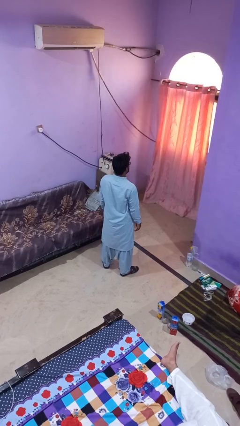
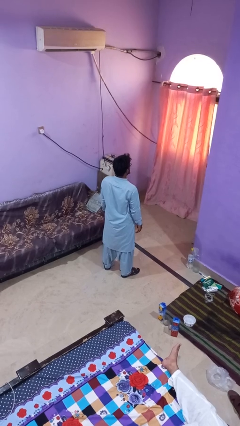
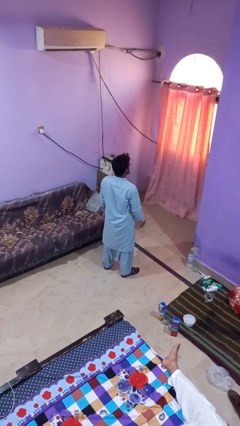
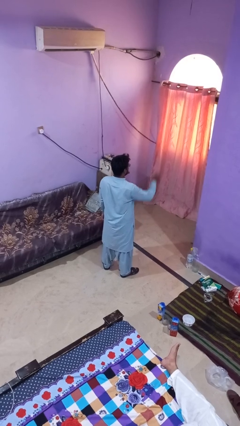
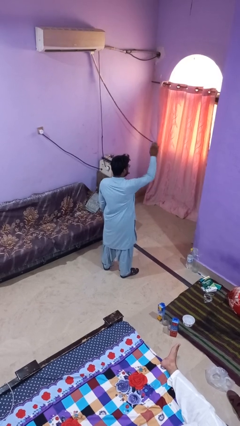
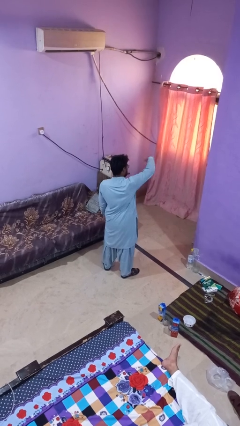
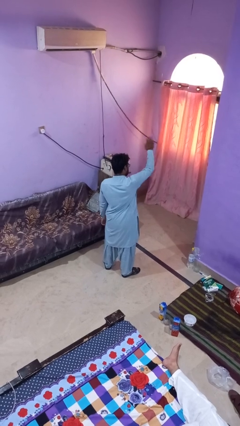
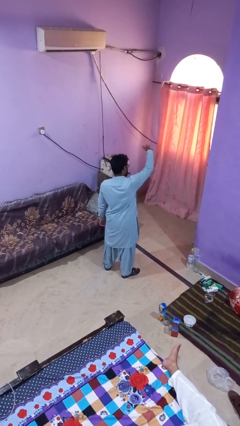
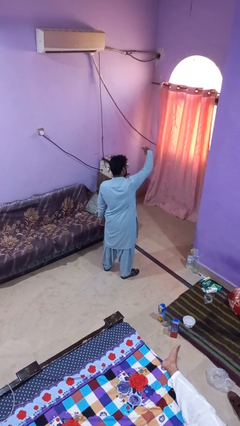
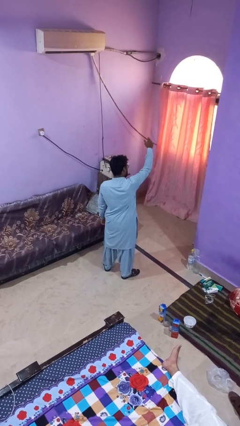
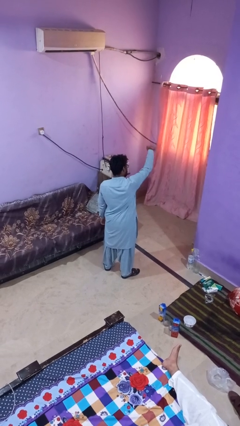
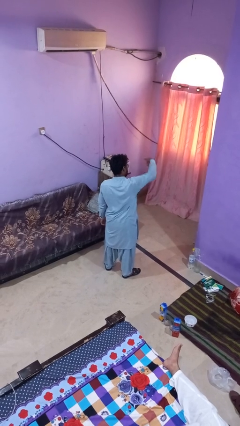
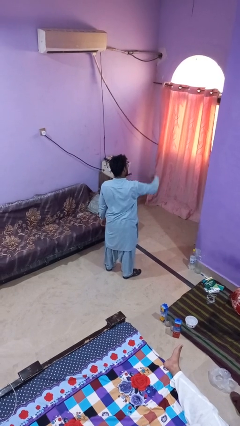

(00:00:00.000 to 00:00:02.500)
person gestures come here

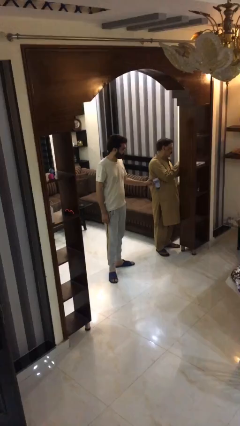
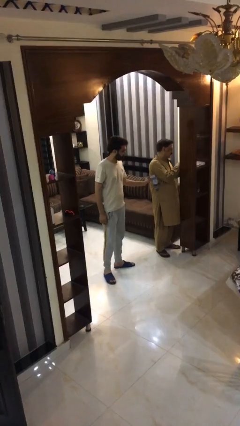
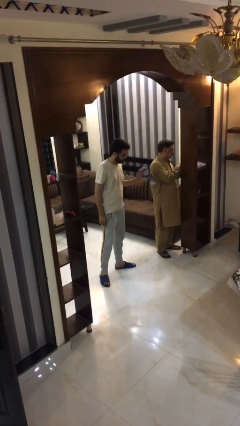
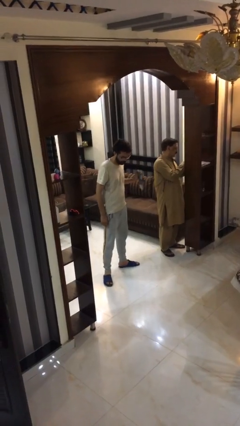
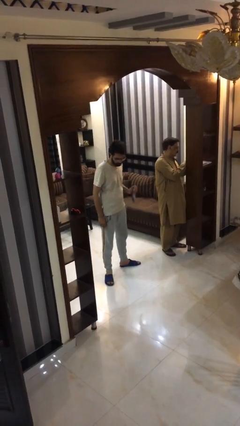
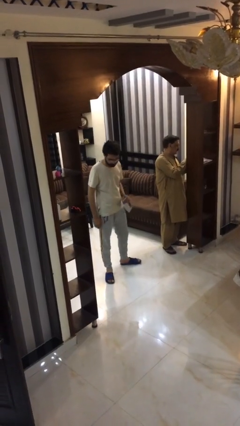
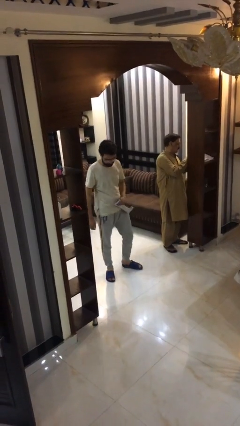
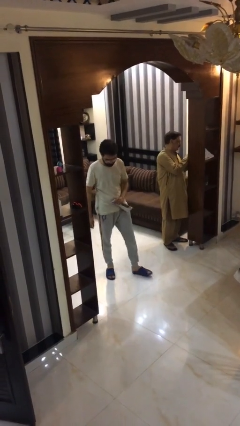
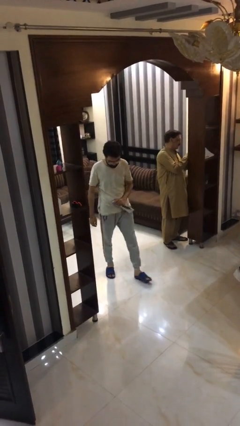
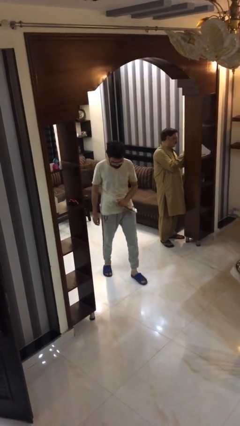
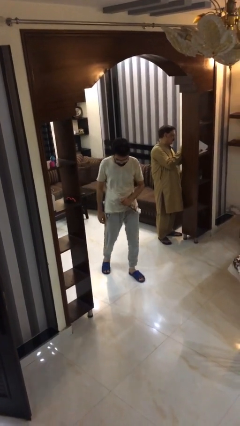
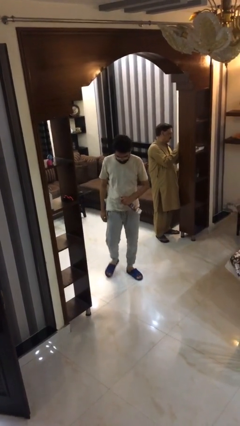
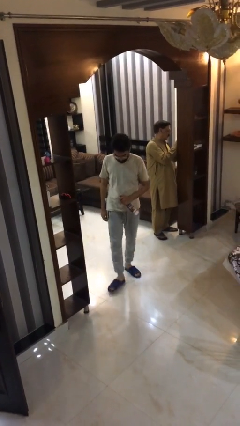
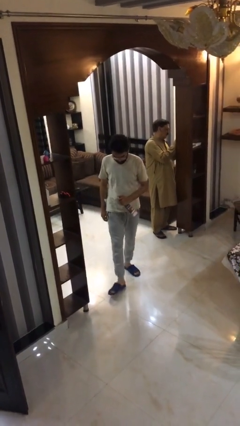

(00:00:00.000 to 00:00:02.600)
person steals object from person

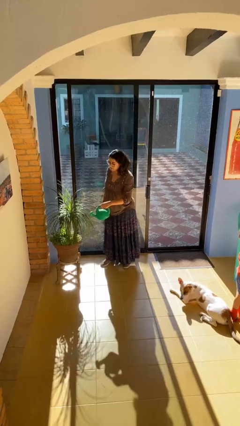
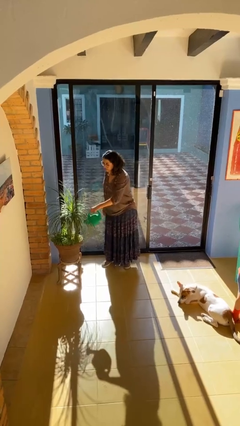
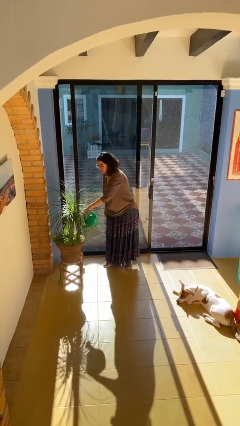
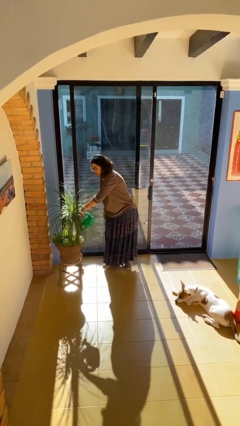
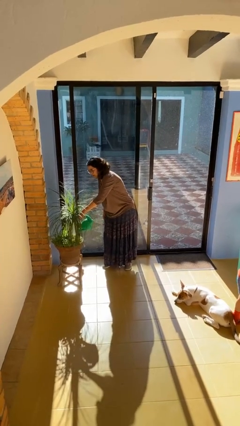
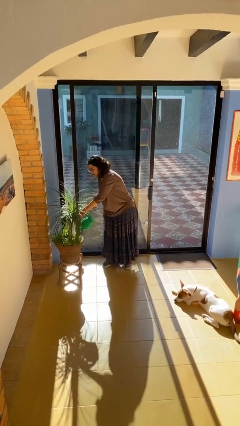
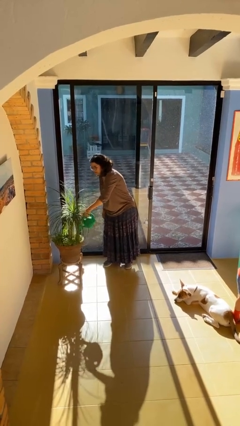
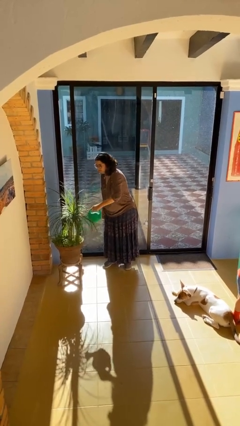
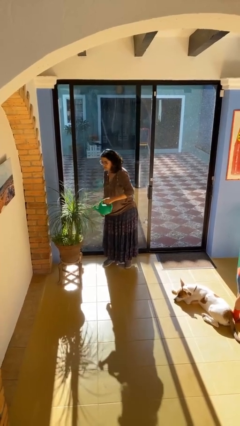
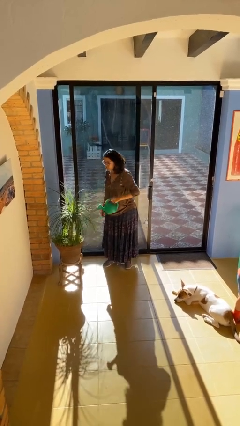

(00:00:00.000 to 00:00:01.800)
person waters houseplant

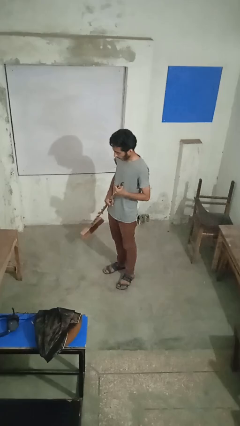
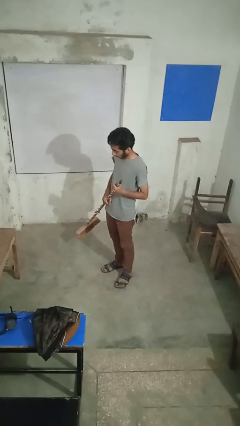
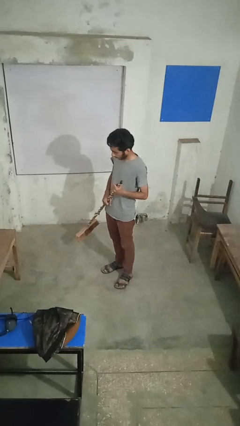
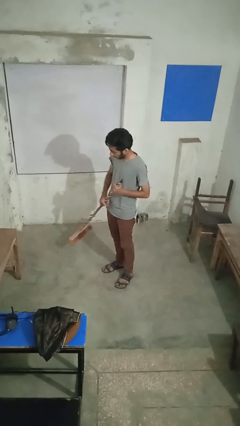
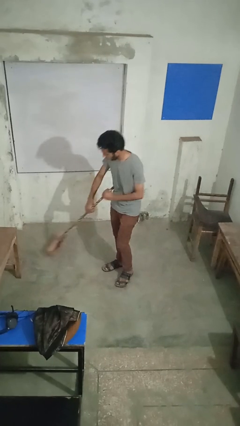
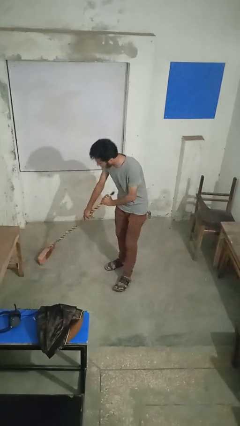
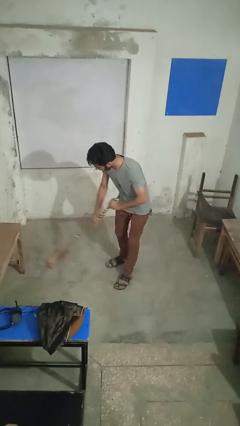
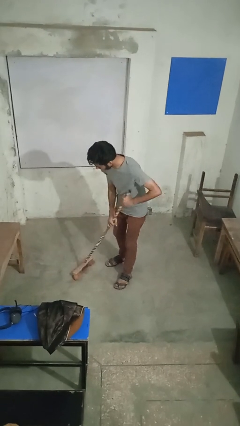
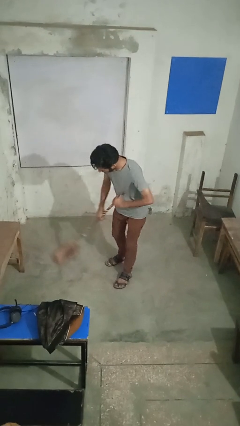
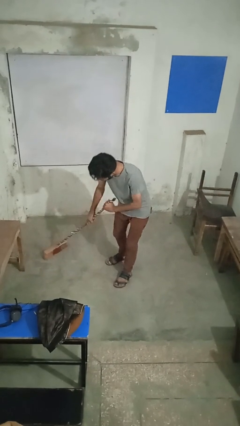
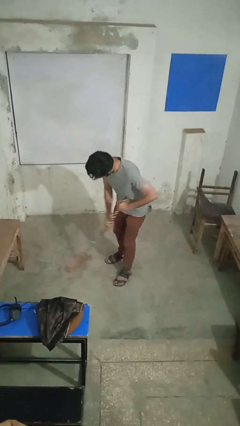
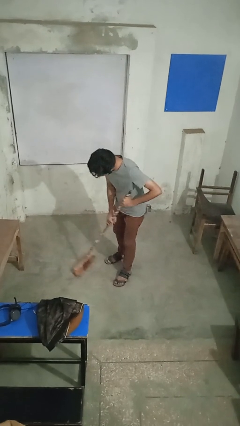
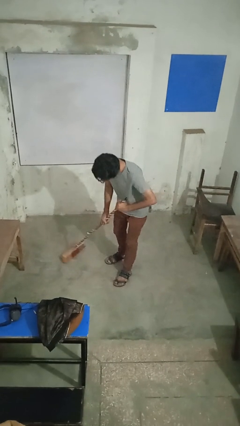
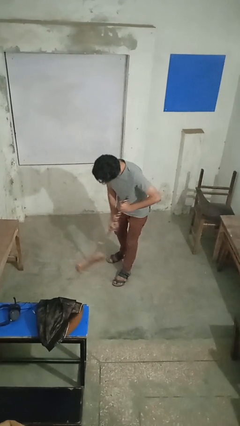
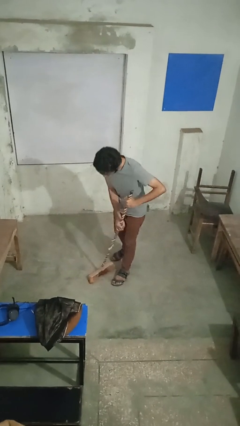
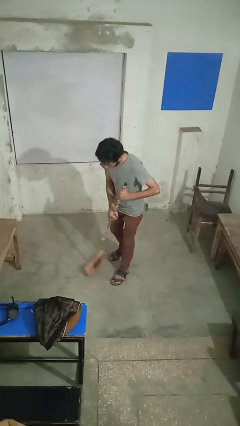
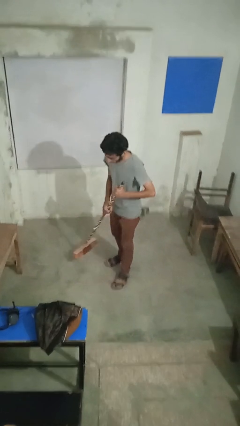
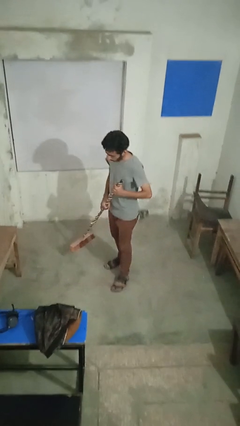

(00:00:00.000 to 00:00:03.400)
person sweeps floor

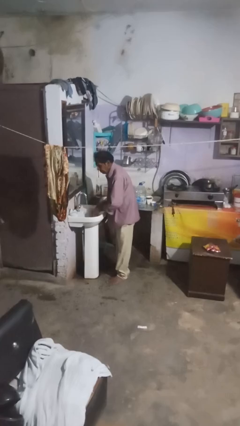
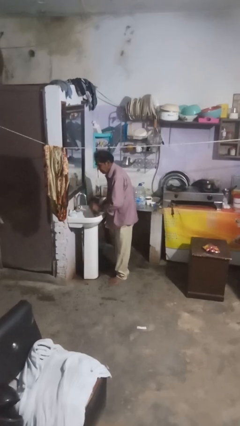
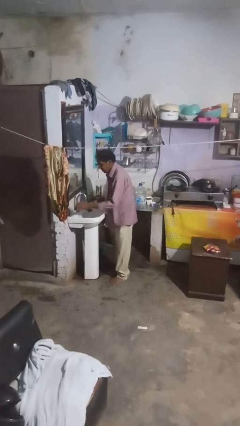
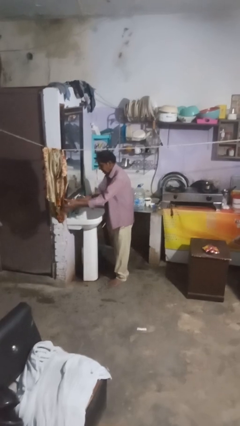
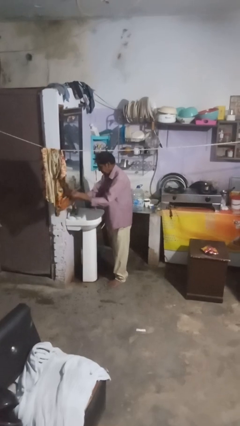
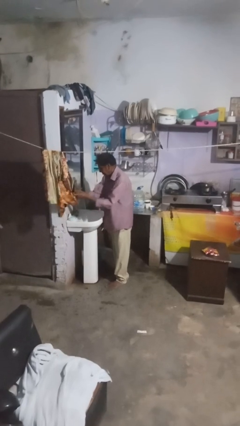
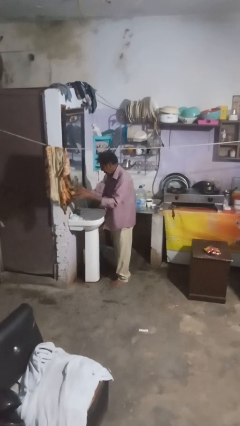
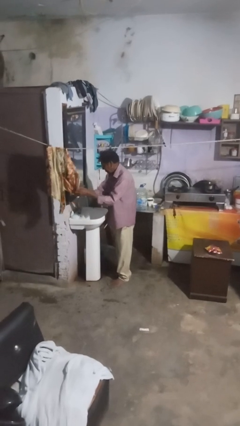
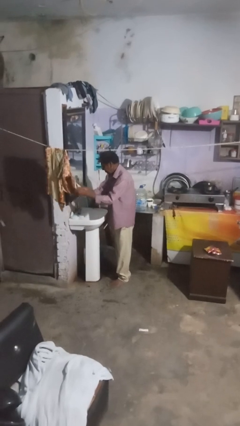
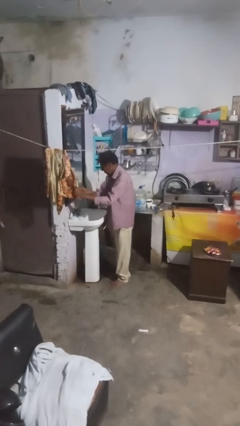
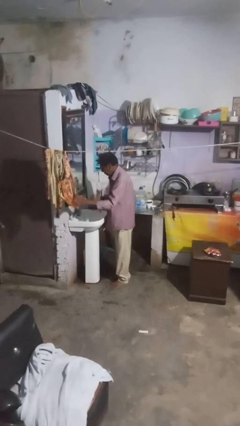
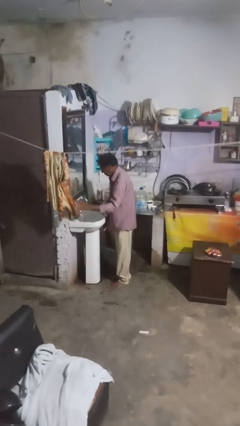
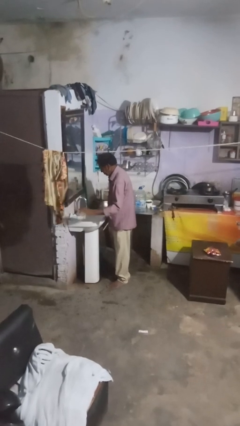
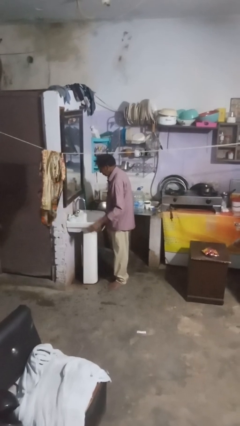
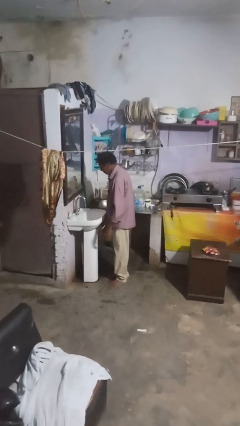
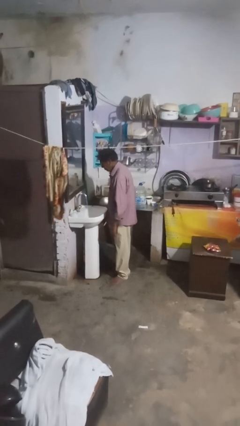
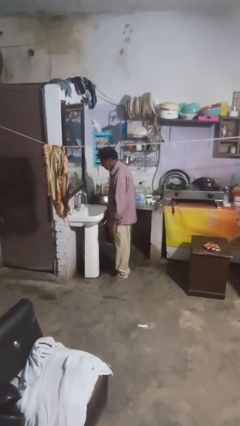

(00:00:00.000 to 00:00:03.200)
person dries hands with towel

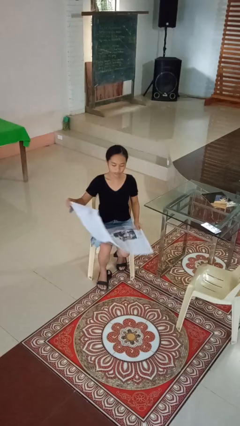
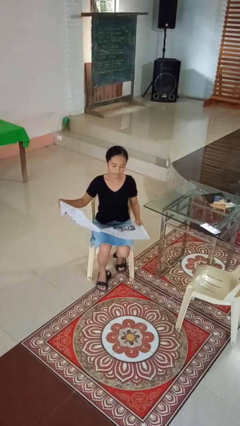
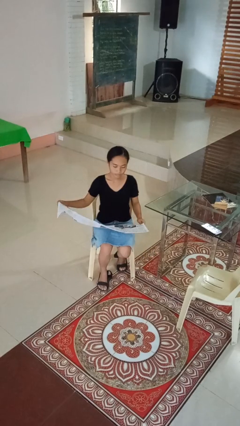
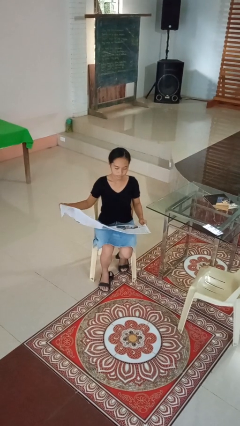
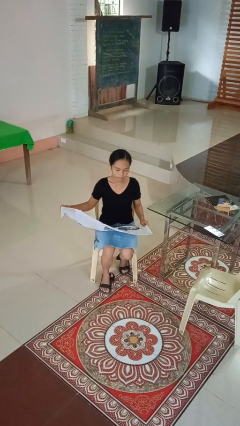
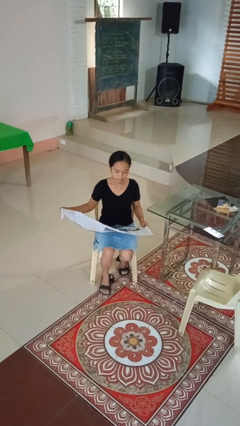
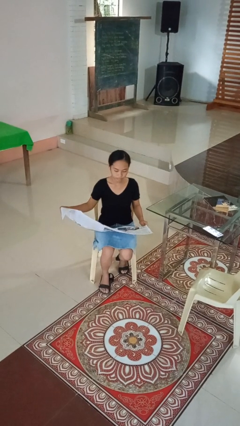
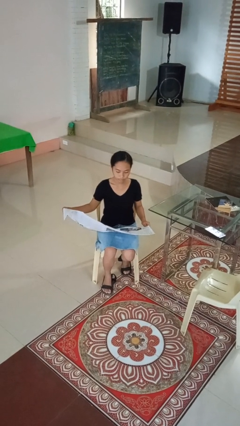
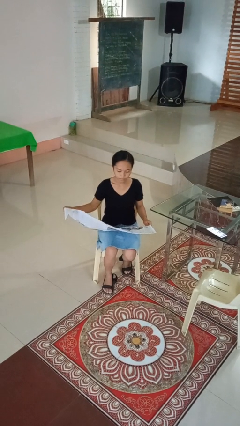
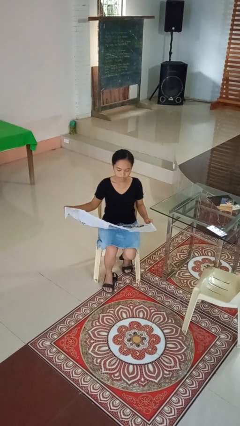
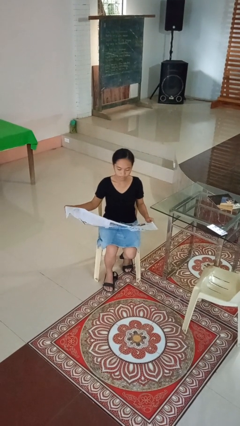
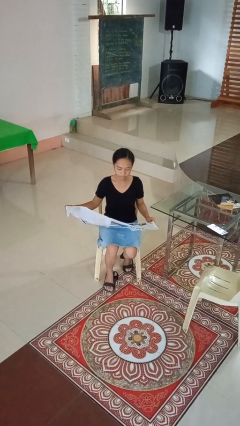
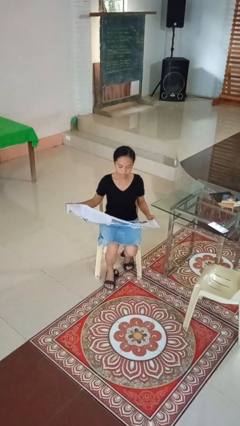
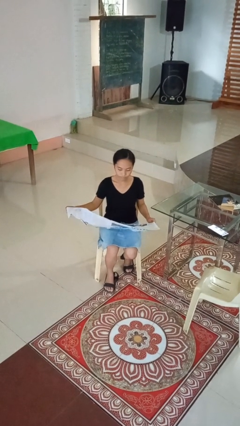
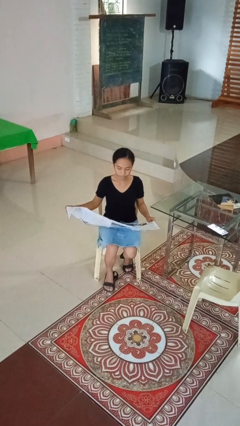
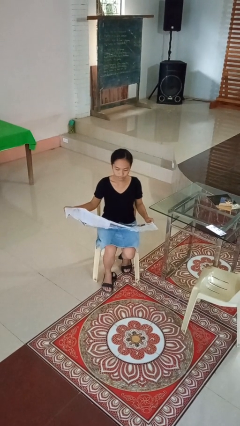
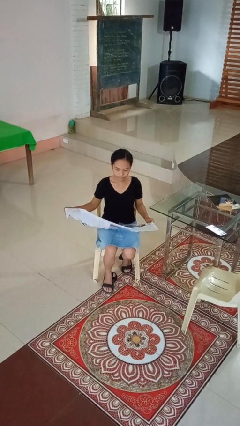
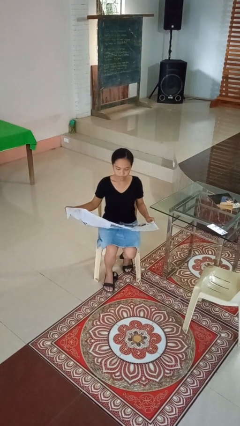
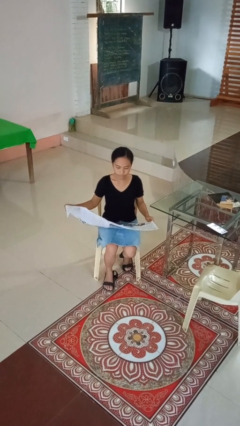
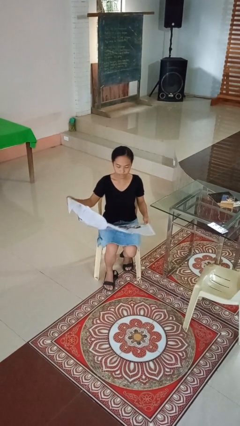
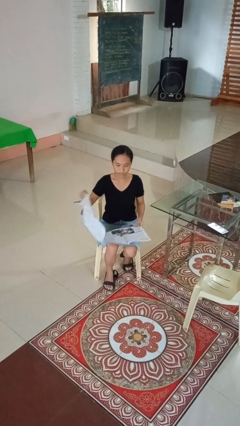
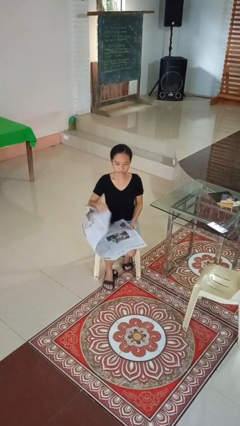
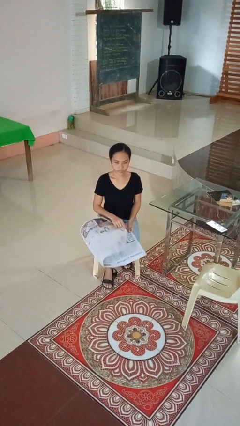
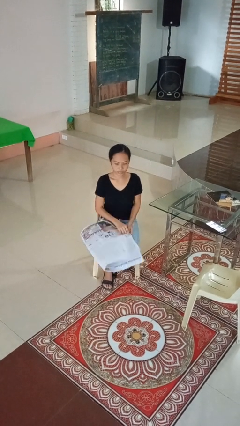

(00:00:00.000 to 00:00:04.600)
person reads newspaper
